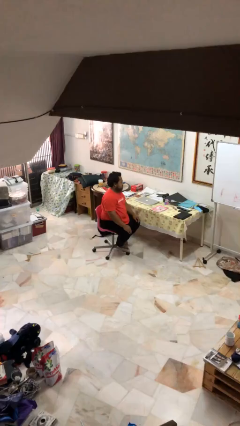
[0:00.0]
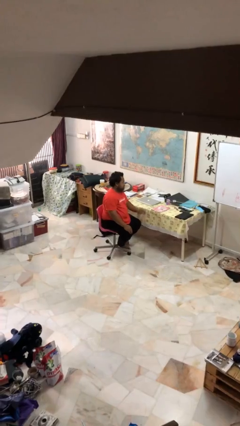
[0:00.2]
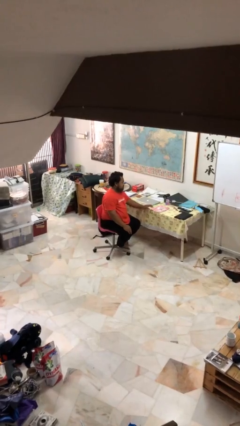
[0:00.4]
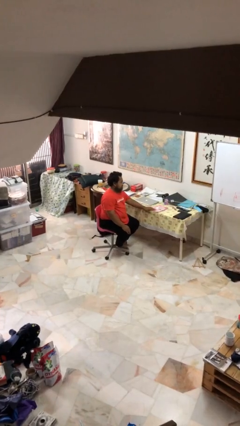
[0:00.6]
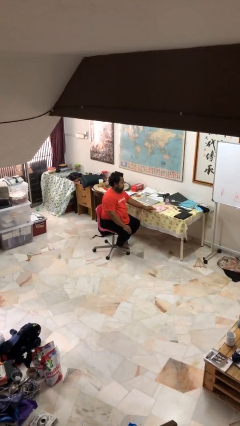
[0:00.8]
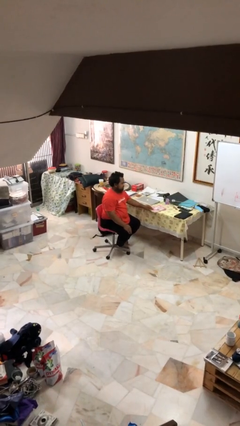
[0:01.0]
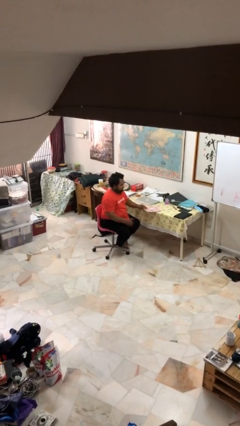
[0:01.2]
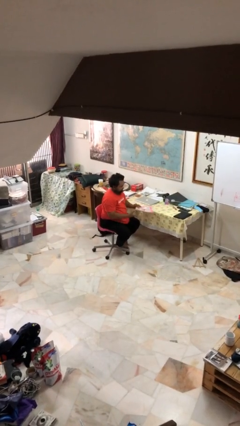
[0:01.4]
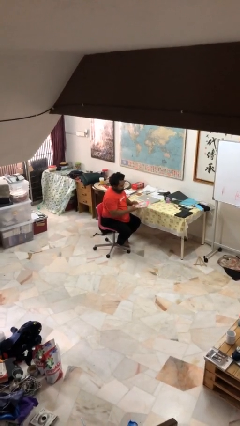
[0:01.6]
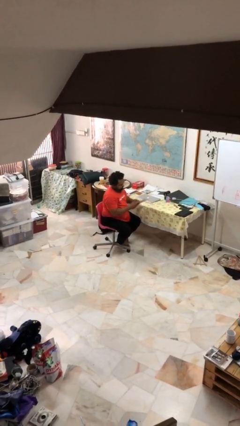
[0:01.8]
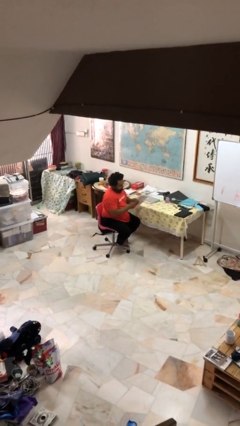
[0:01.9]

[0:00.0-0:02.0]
person picks up object from table

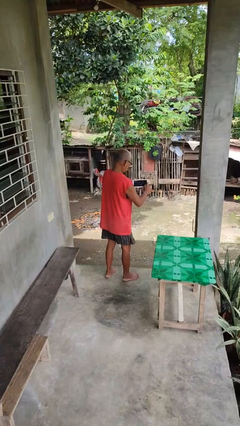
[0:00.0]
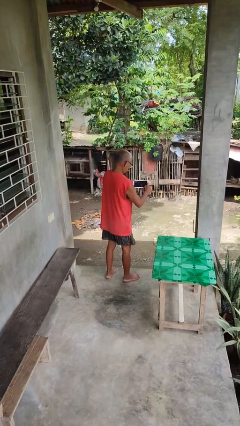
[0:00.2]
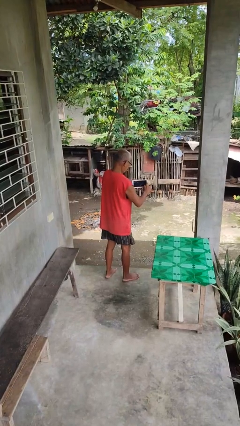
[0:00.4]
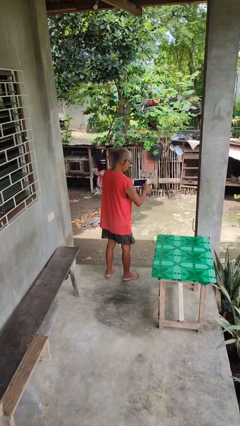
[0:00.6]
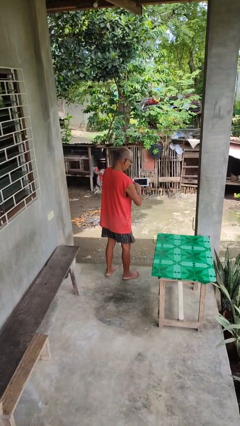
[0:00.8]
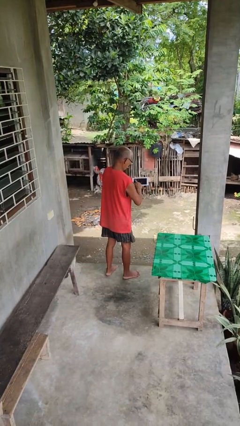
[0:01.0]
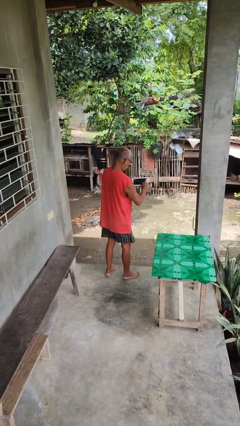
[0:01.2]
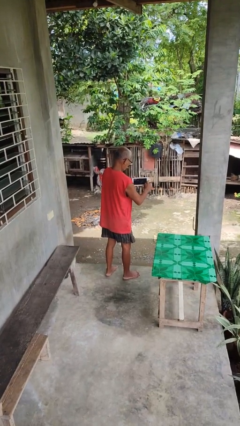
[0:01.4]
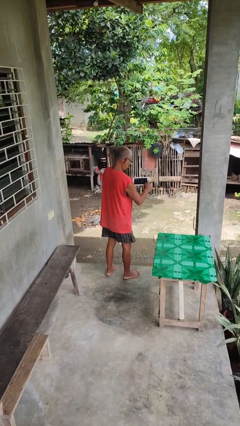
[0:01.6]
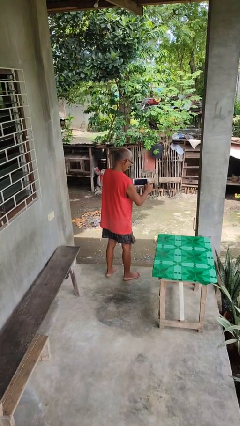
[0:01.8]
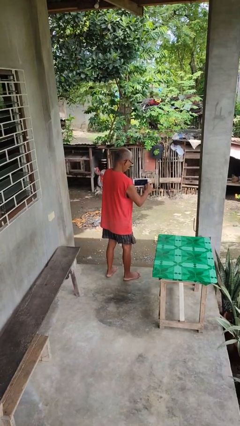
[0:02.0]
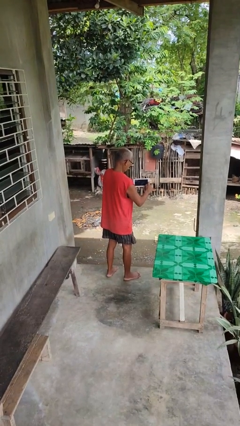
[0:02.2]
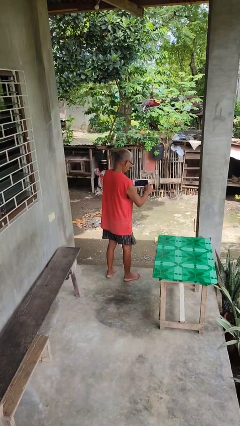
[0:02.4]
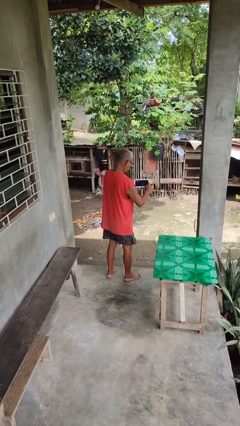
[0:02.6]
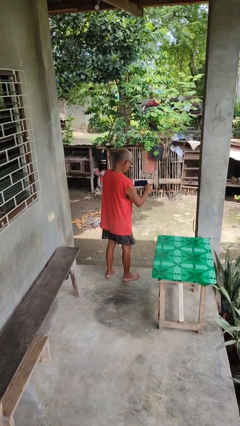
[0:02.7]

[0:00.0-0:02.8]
person interacts with tablet

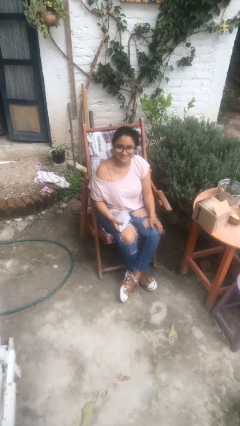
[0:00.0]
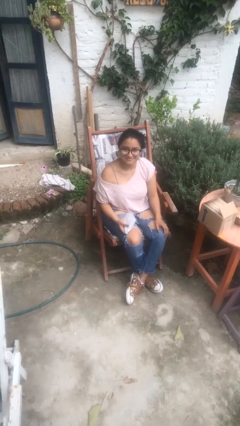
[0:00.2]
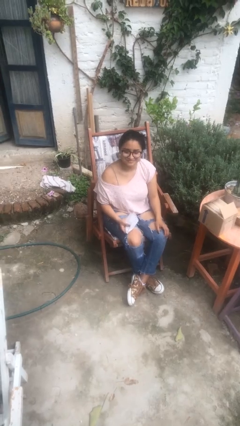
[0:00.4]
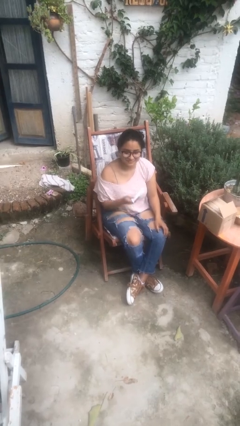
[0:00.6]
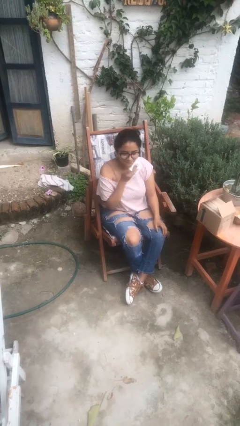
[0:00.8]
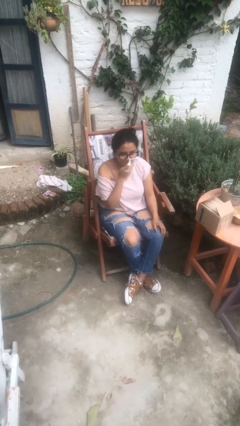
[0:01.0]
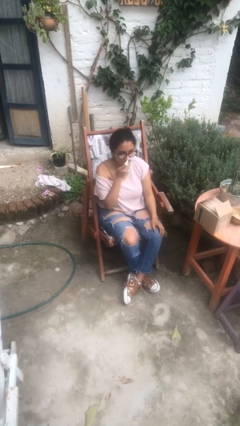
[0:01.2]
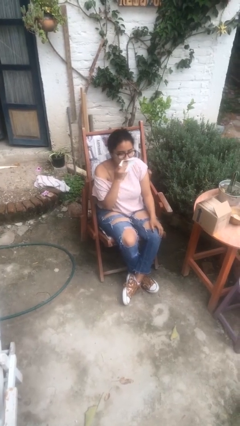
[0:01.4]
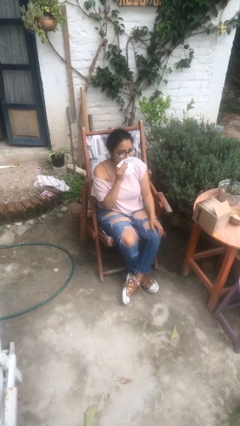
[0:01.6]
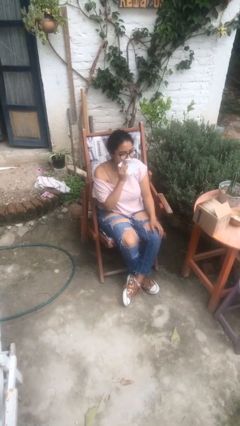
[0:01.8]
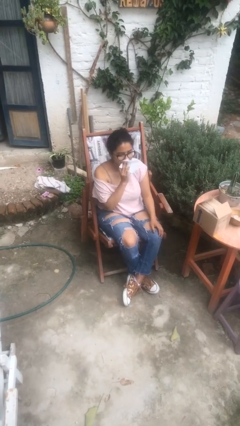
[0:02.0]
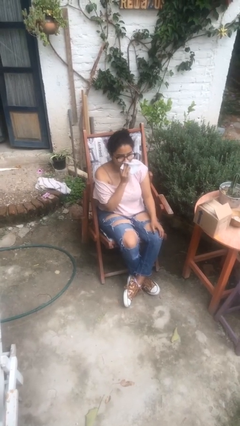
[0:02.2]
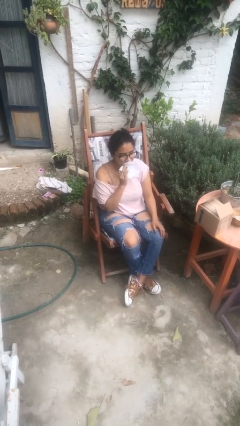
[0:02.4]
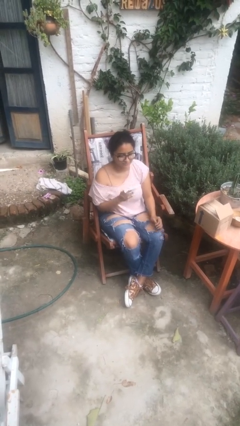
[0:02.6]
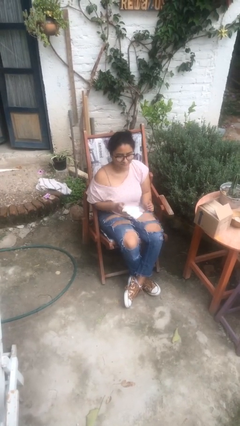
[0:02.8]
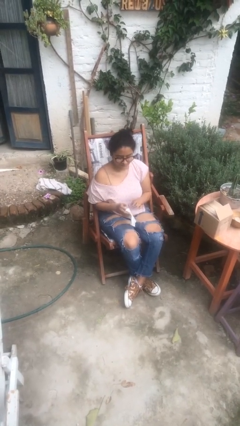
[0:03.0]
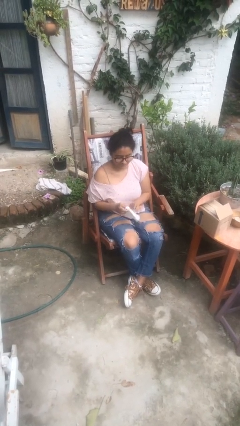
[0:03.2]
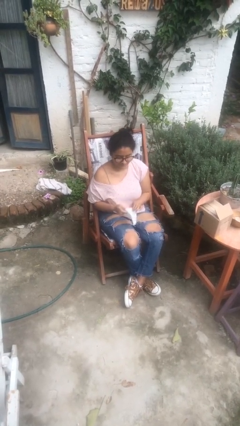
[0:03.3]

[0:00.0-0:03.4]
person wipes mouth with napkin

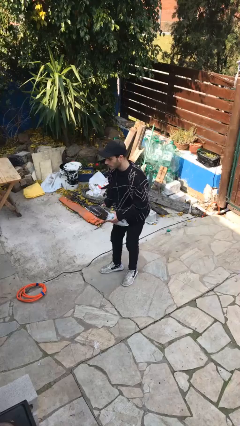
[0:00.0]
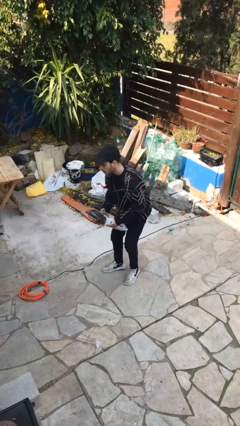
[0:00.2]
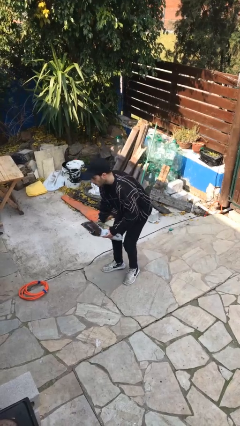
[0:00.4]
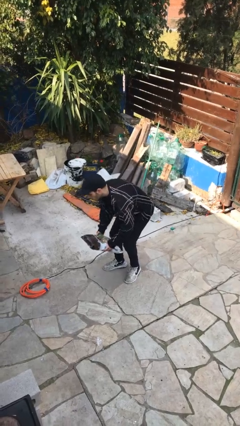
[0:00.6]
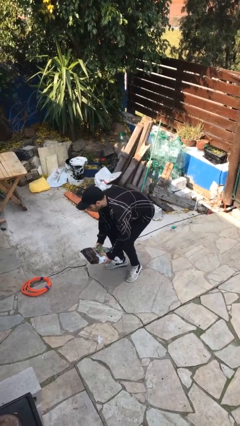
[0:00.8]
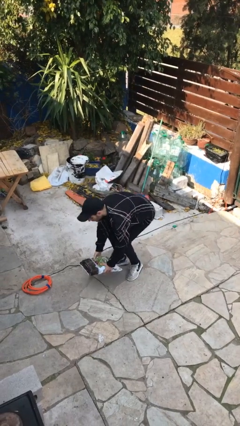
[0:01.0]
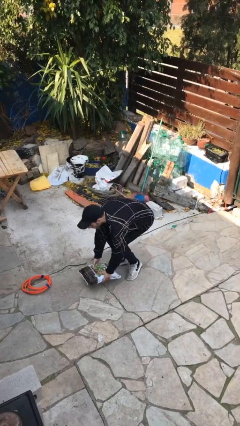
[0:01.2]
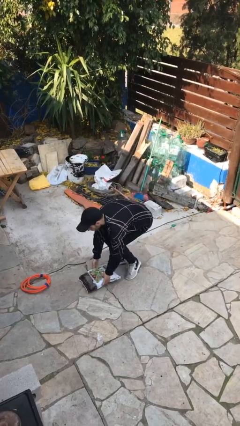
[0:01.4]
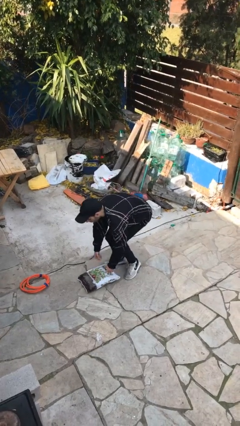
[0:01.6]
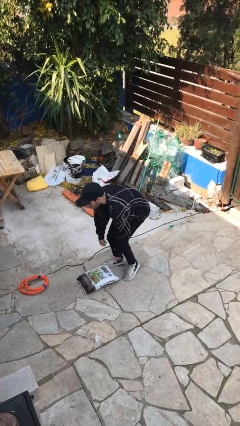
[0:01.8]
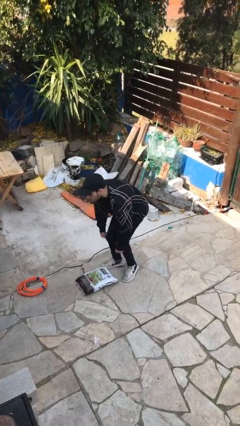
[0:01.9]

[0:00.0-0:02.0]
person puts down object on floor

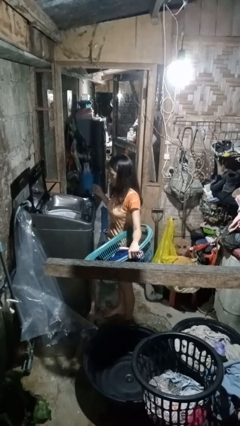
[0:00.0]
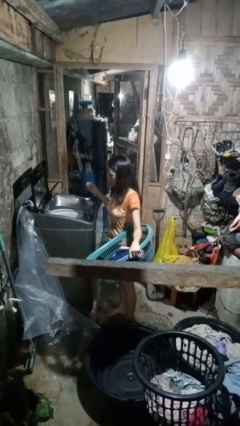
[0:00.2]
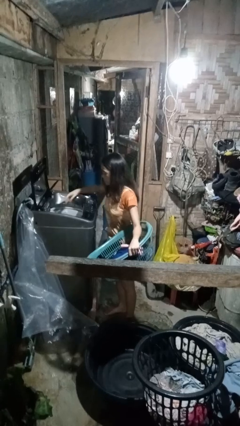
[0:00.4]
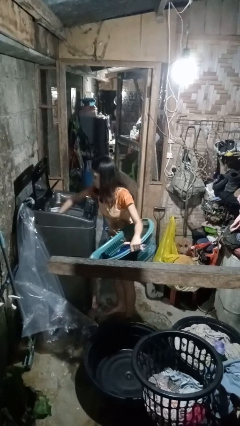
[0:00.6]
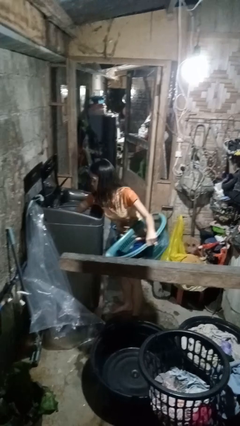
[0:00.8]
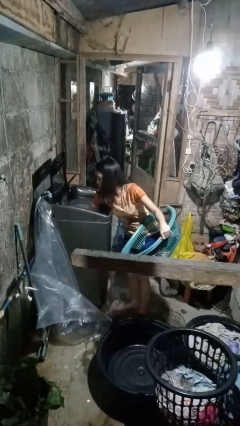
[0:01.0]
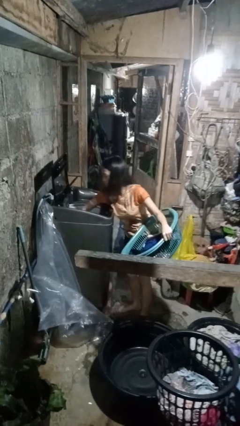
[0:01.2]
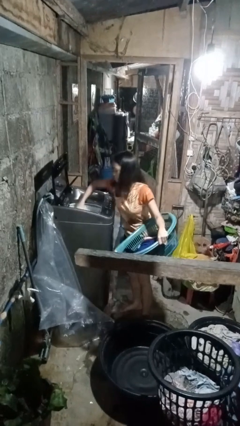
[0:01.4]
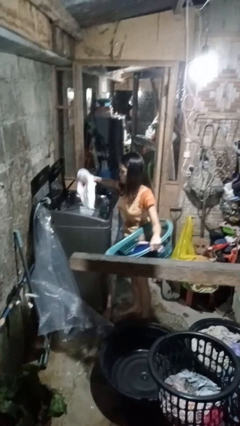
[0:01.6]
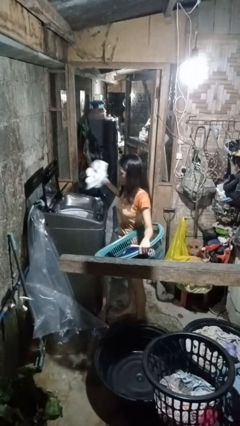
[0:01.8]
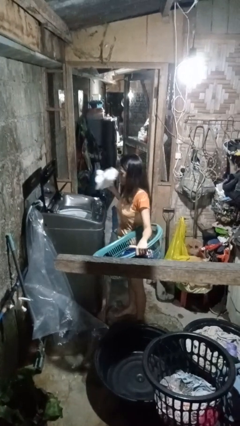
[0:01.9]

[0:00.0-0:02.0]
person loads clotheswasher

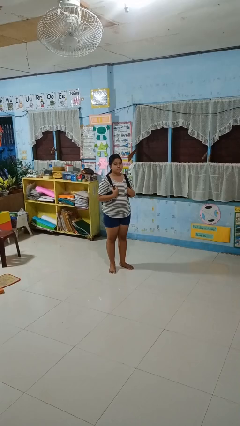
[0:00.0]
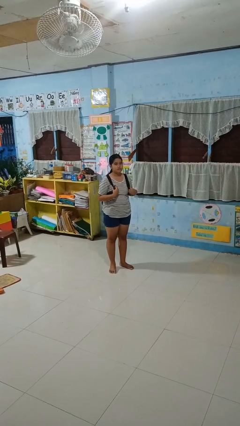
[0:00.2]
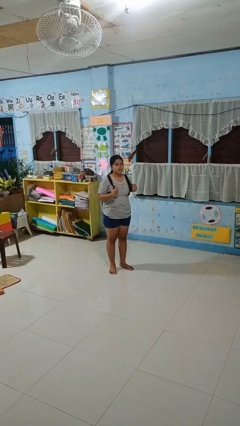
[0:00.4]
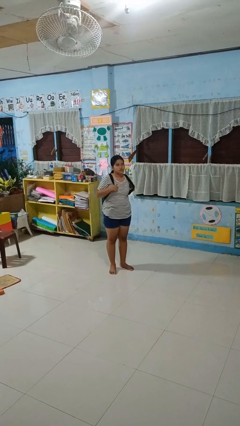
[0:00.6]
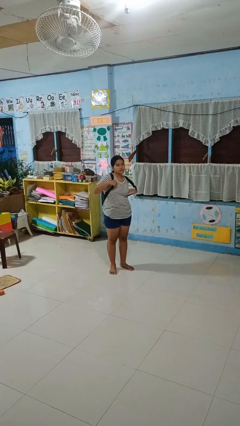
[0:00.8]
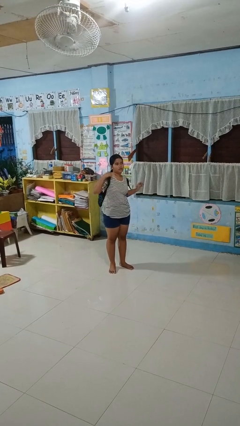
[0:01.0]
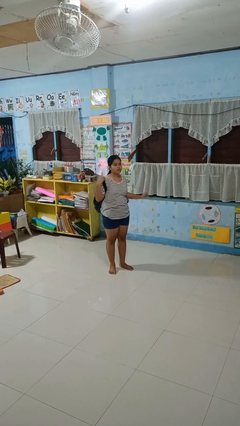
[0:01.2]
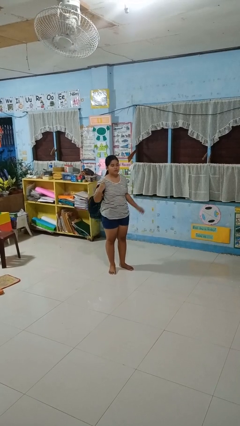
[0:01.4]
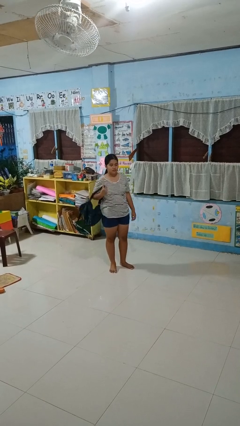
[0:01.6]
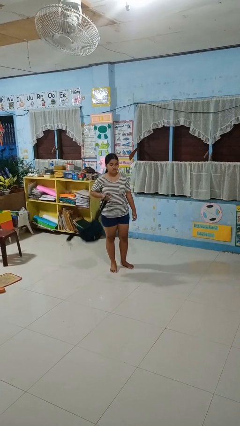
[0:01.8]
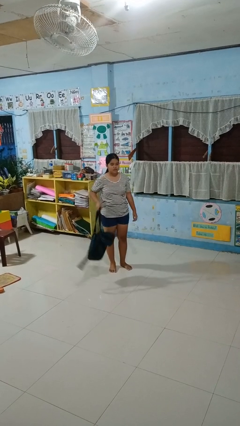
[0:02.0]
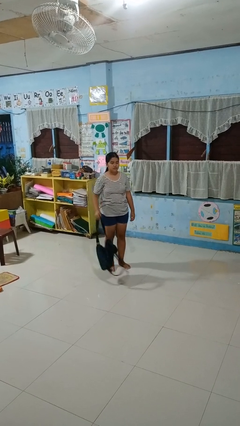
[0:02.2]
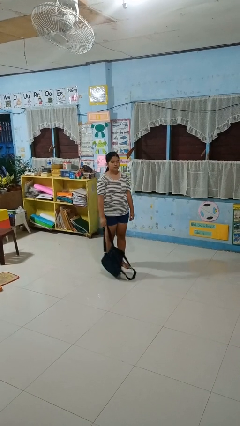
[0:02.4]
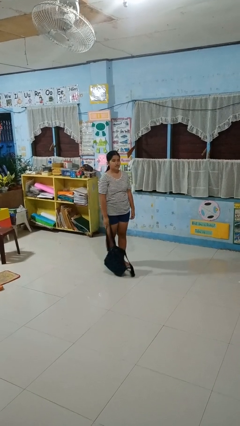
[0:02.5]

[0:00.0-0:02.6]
person takes off backpack

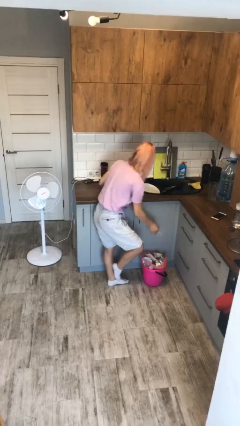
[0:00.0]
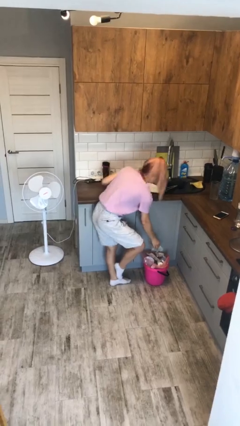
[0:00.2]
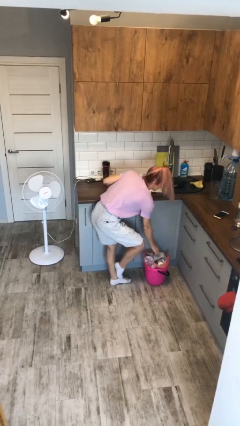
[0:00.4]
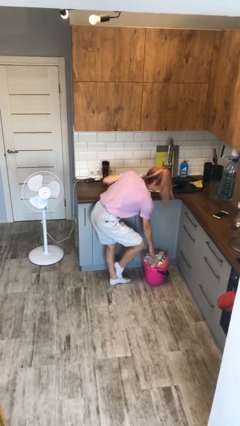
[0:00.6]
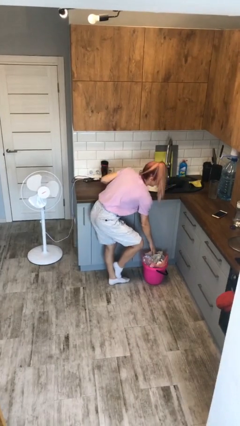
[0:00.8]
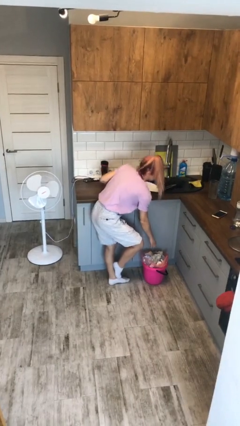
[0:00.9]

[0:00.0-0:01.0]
person discards trash

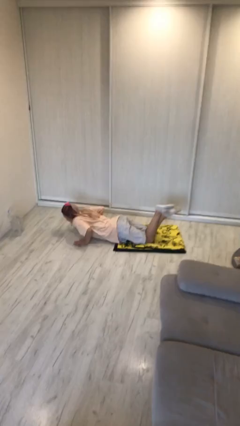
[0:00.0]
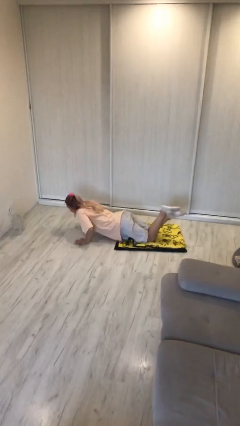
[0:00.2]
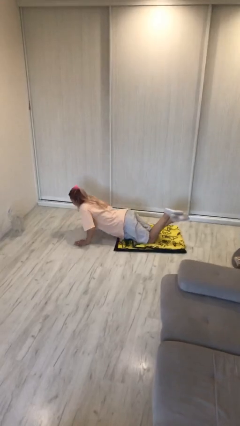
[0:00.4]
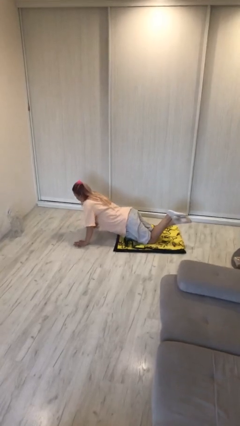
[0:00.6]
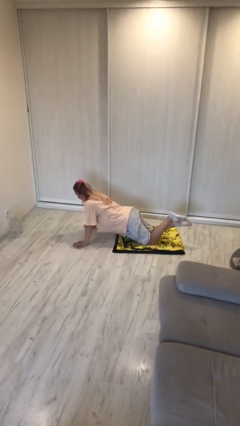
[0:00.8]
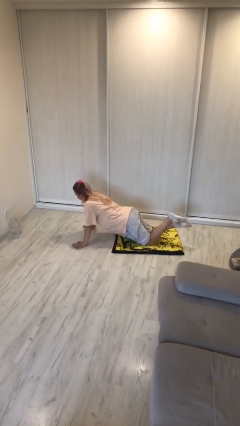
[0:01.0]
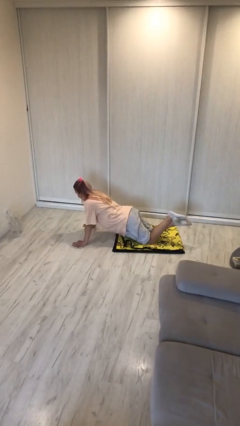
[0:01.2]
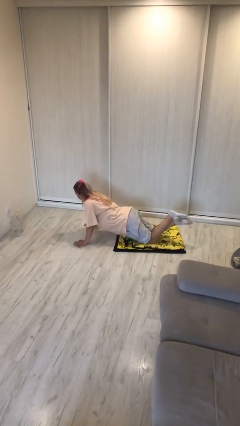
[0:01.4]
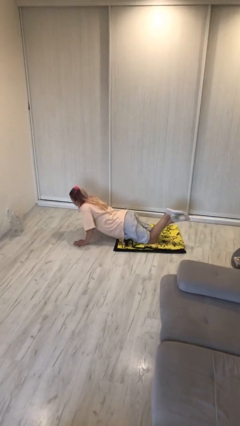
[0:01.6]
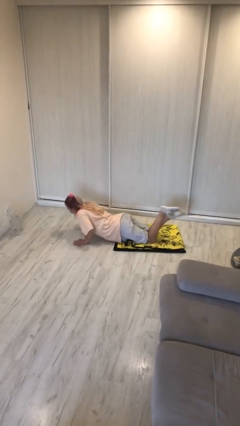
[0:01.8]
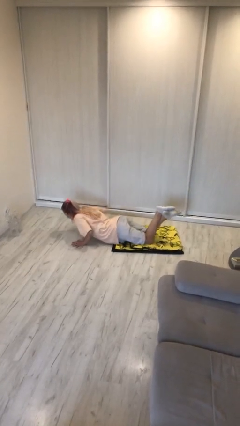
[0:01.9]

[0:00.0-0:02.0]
person exercises with pushup
